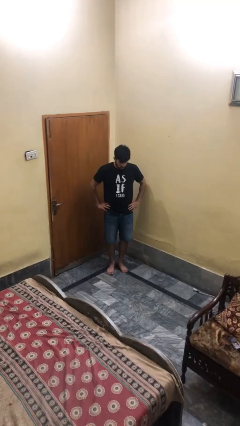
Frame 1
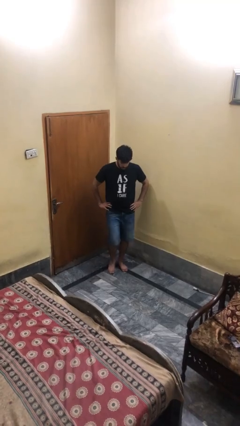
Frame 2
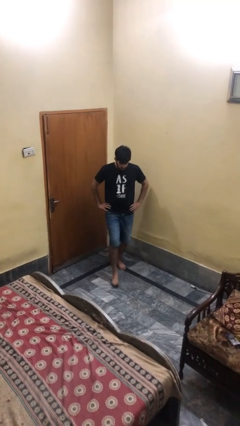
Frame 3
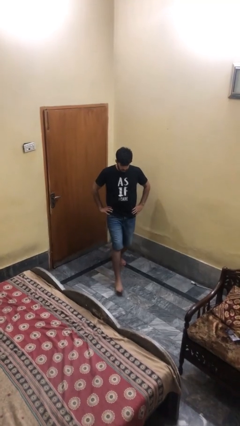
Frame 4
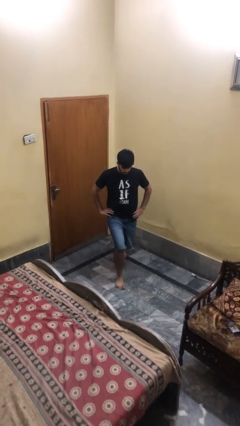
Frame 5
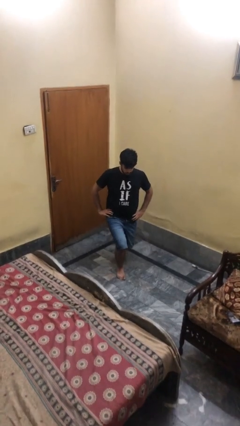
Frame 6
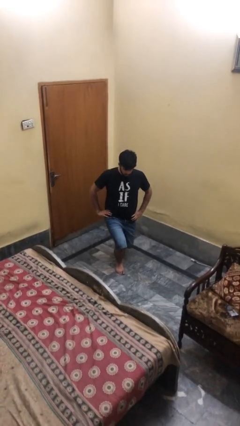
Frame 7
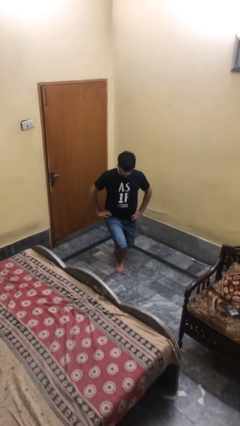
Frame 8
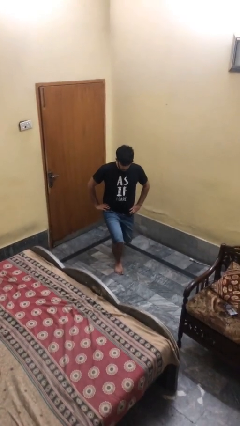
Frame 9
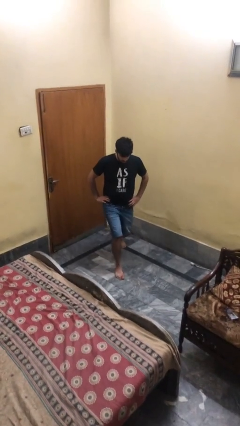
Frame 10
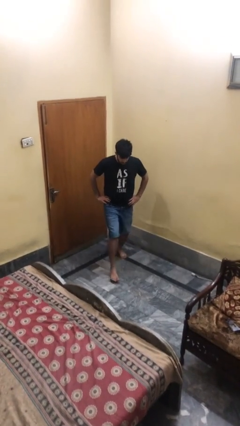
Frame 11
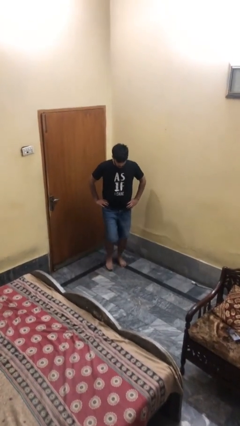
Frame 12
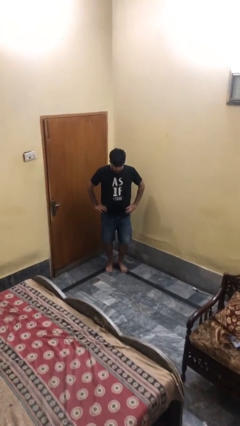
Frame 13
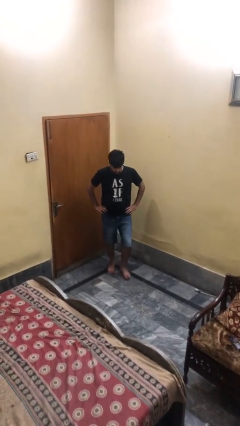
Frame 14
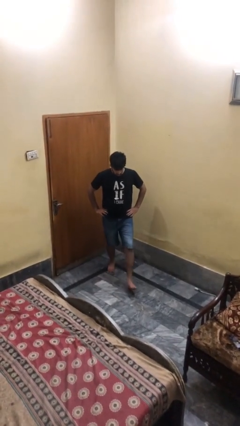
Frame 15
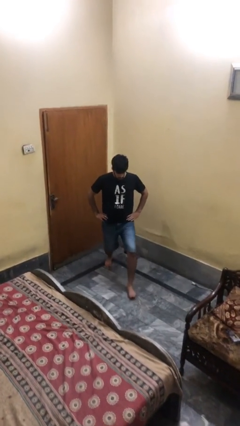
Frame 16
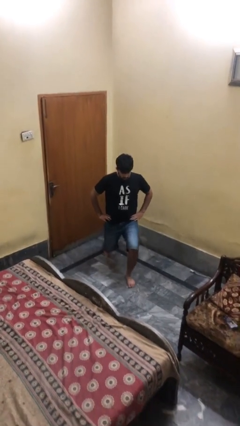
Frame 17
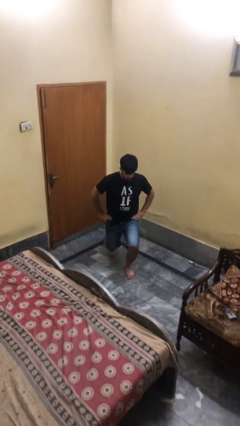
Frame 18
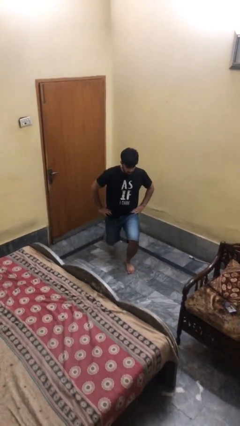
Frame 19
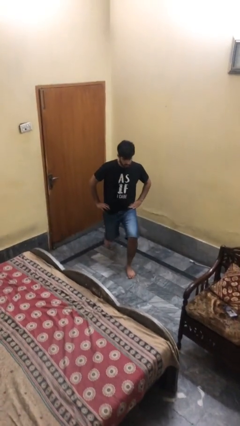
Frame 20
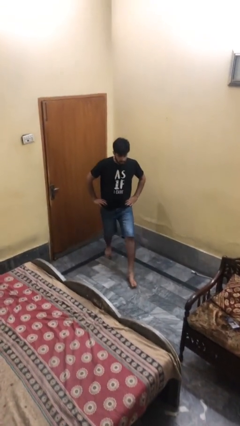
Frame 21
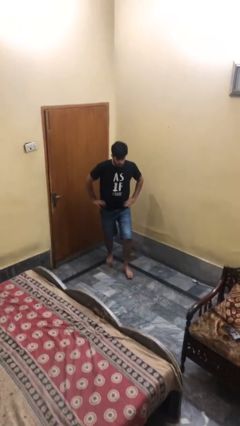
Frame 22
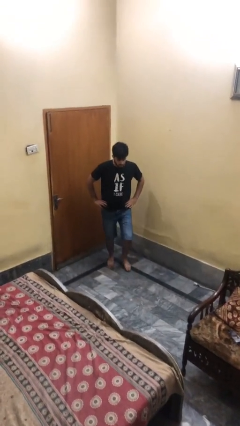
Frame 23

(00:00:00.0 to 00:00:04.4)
person exercises with lunges

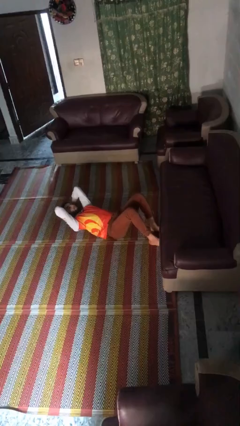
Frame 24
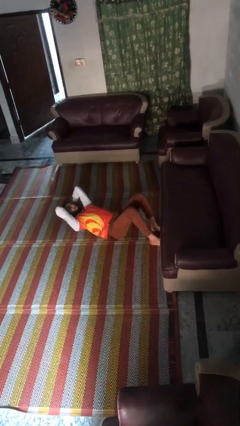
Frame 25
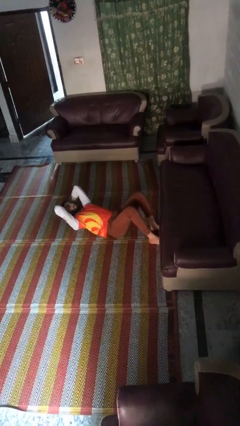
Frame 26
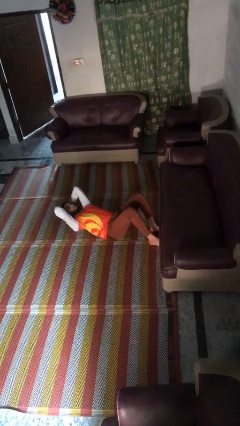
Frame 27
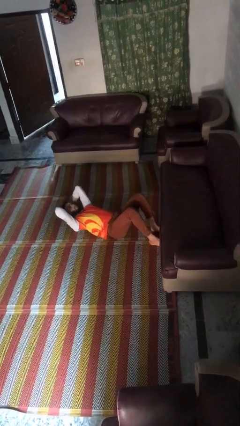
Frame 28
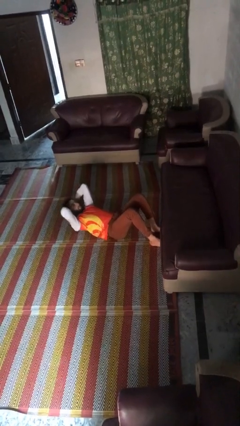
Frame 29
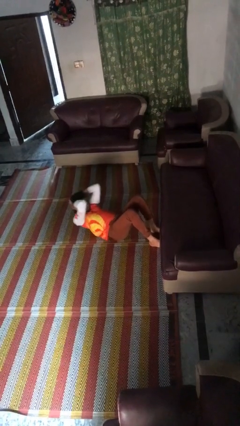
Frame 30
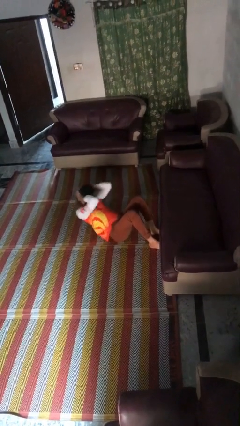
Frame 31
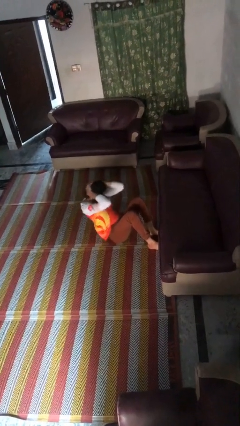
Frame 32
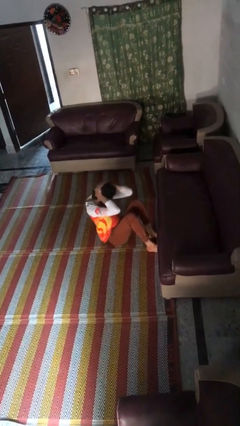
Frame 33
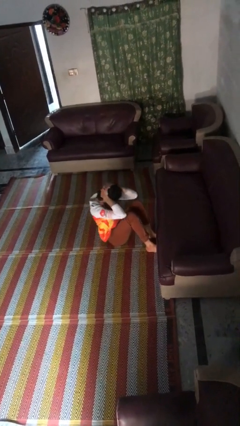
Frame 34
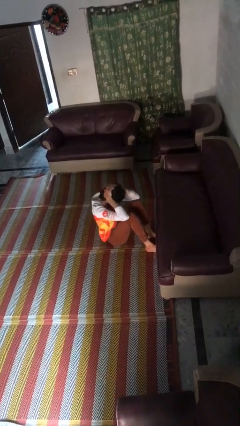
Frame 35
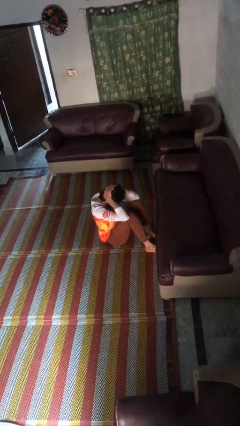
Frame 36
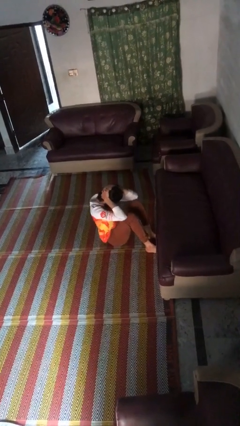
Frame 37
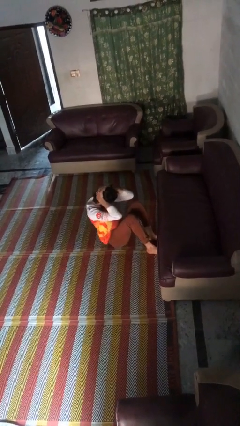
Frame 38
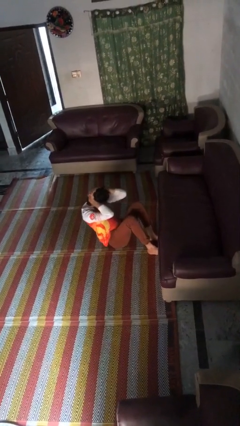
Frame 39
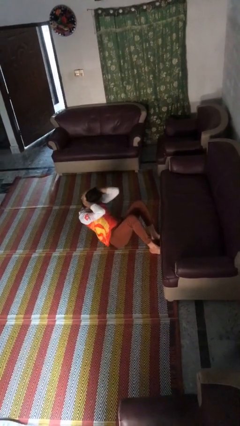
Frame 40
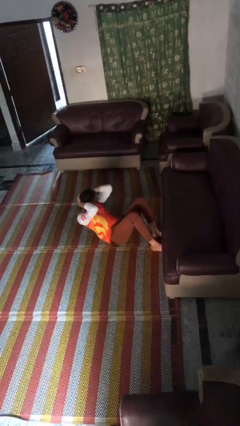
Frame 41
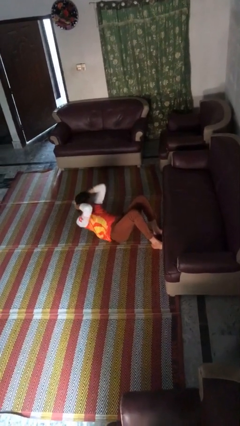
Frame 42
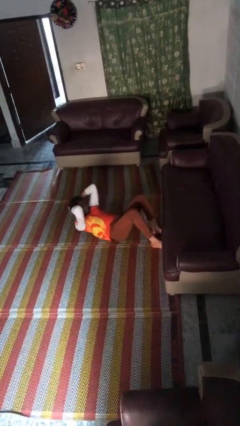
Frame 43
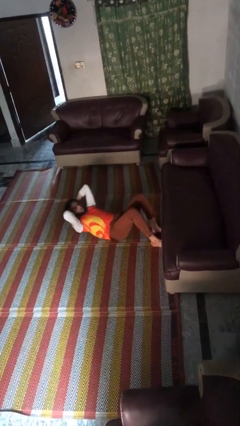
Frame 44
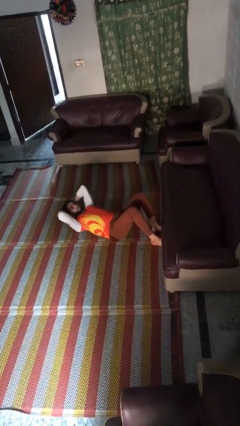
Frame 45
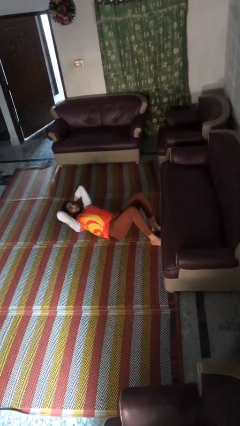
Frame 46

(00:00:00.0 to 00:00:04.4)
person exercises with situp

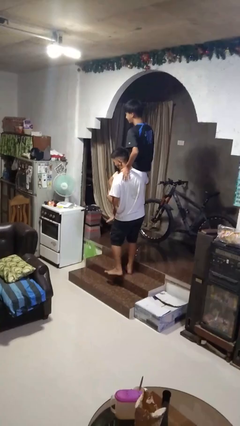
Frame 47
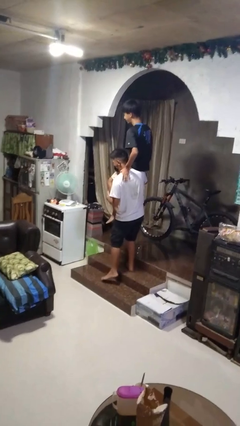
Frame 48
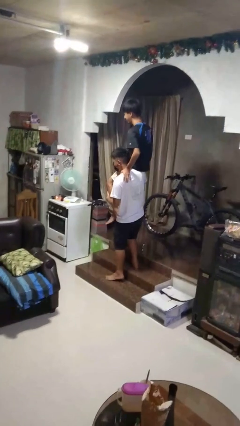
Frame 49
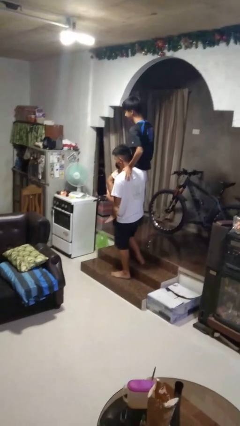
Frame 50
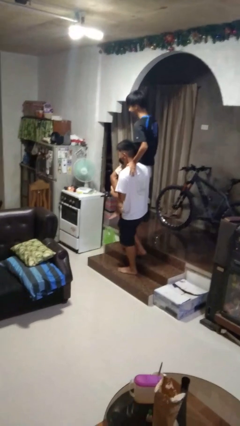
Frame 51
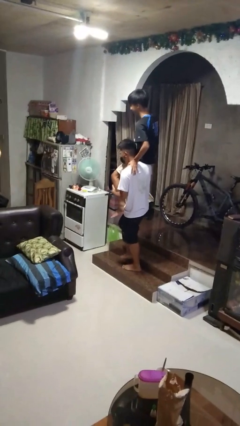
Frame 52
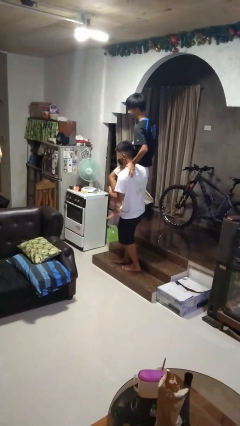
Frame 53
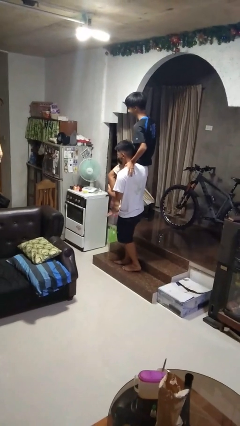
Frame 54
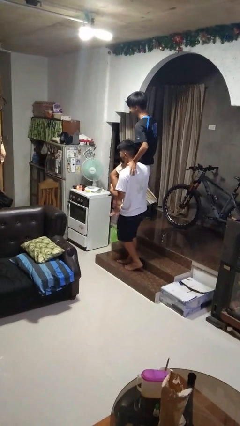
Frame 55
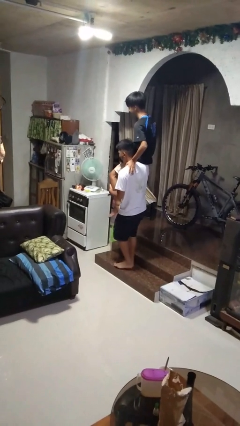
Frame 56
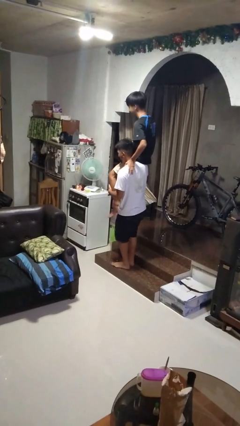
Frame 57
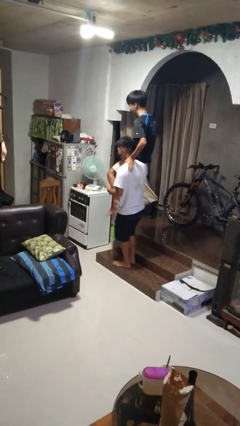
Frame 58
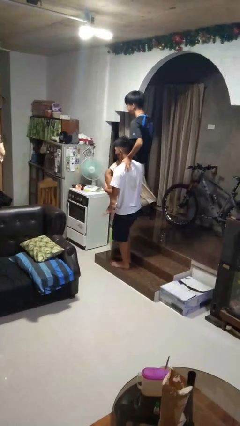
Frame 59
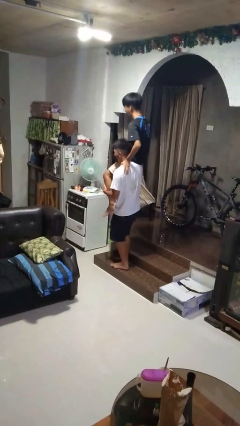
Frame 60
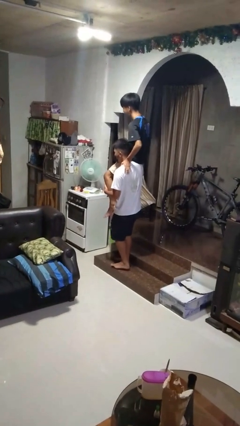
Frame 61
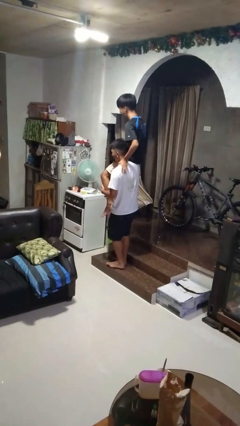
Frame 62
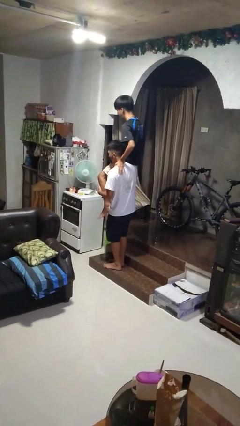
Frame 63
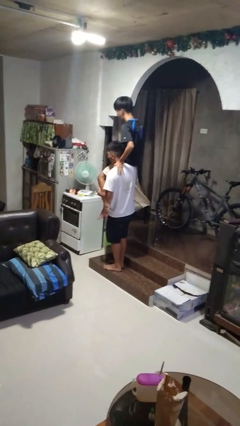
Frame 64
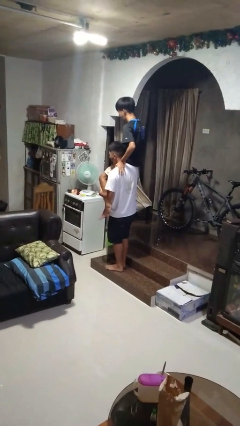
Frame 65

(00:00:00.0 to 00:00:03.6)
person carries person on back

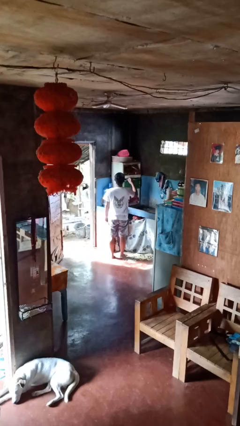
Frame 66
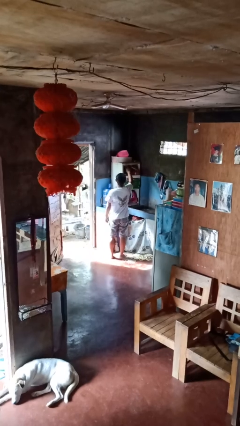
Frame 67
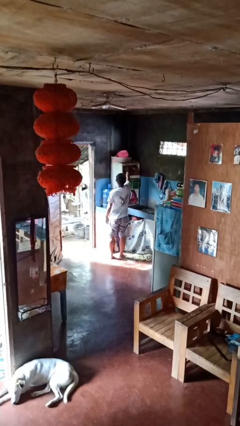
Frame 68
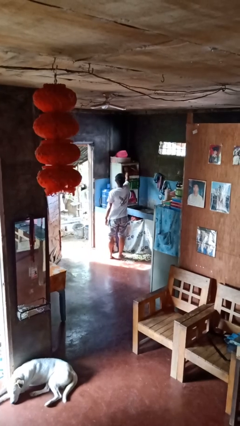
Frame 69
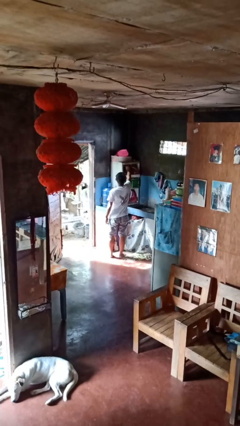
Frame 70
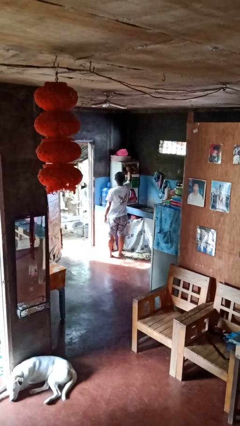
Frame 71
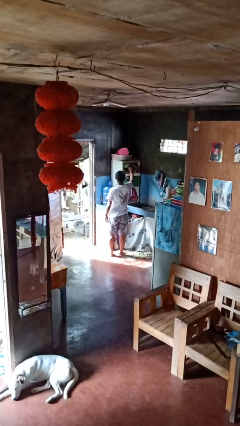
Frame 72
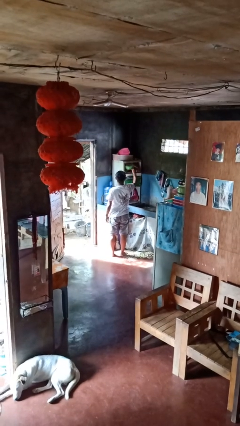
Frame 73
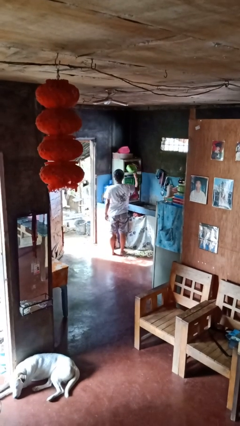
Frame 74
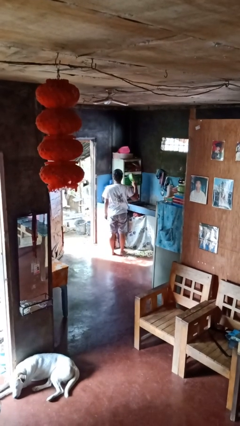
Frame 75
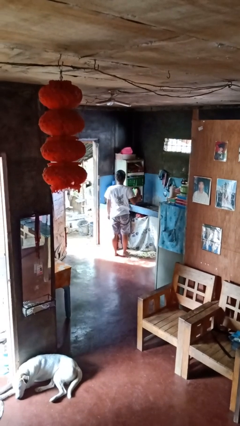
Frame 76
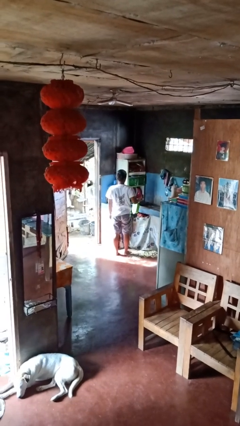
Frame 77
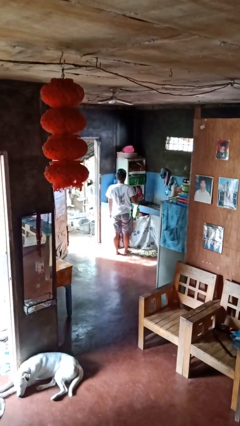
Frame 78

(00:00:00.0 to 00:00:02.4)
person takes object from cabinet

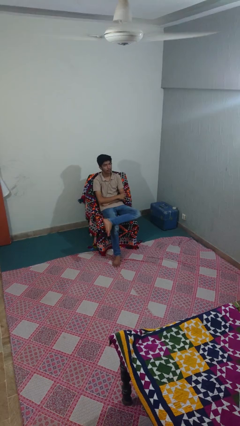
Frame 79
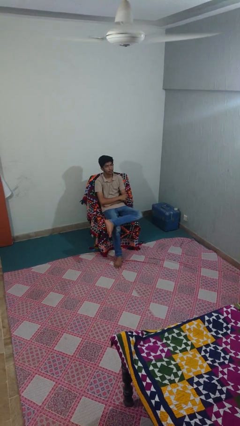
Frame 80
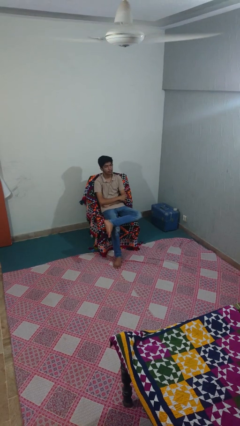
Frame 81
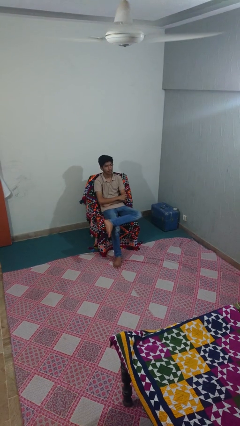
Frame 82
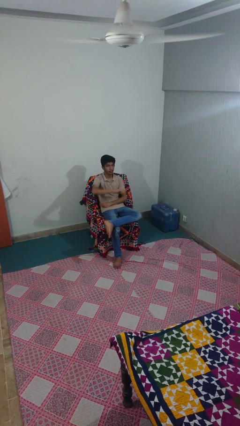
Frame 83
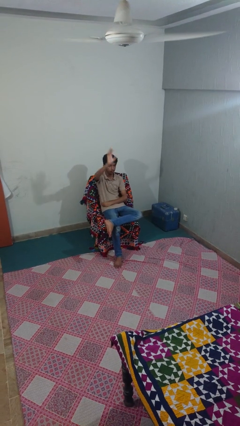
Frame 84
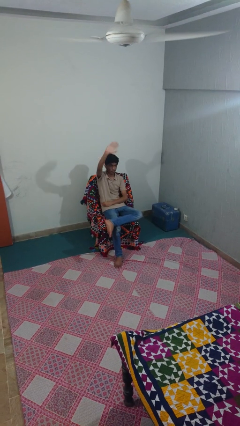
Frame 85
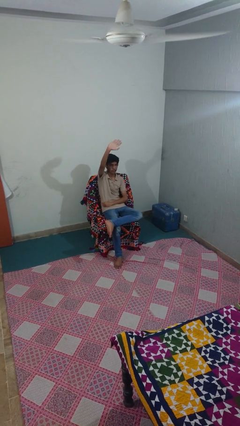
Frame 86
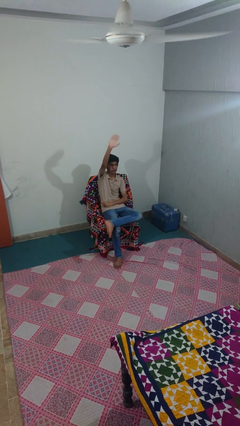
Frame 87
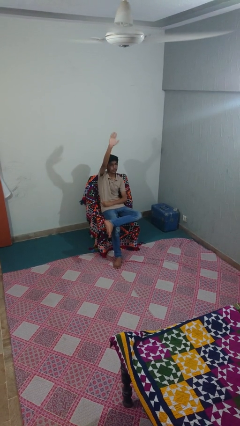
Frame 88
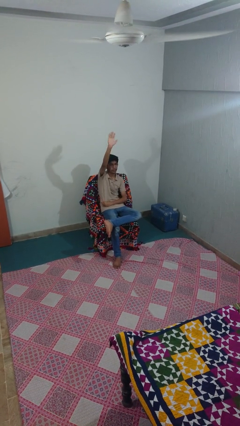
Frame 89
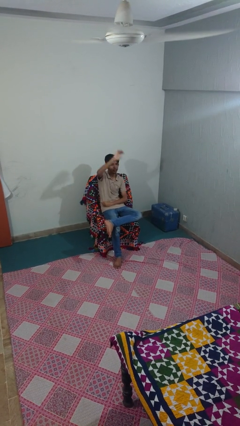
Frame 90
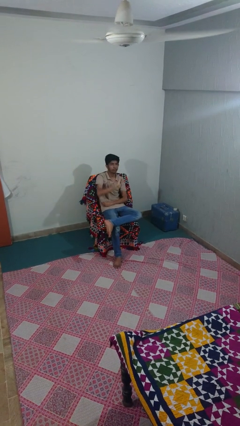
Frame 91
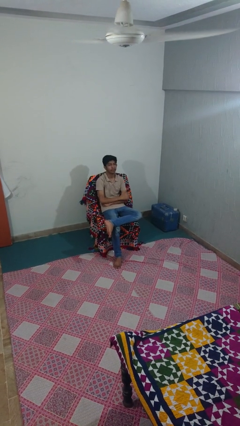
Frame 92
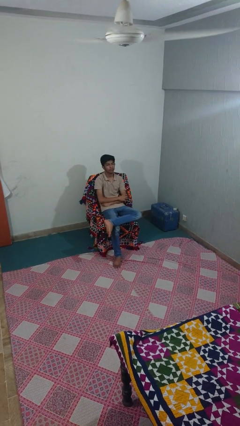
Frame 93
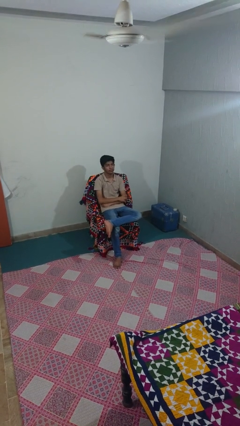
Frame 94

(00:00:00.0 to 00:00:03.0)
person waves at person
